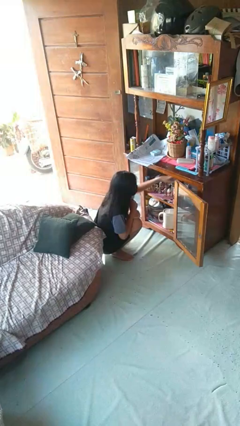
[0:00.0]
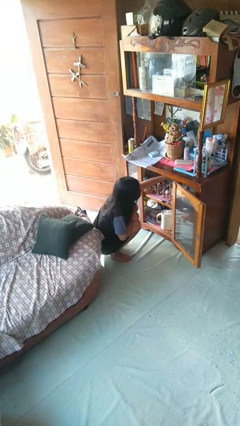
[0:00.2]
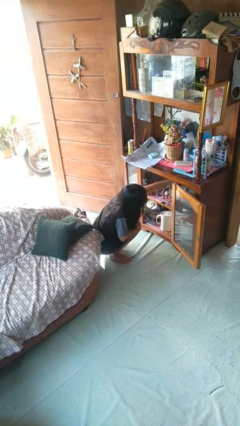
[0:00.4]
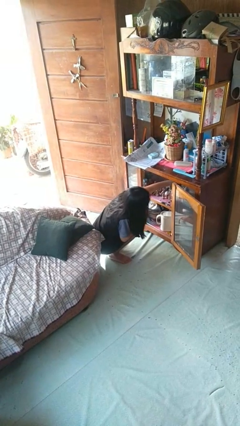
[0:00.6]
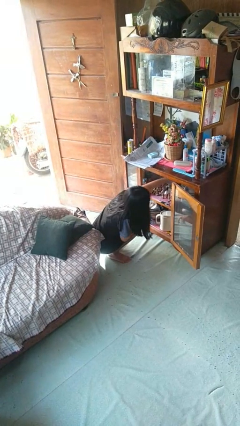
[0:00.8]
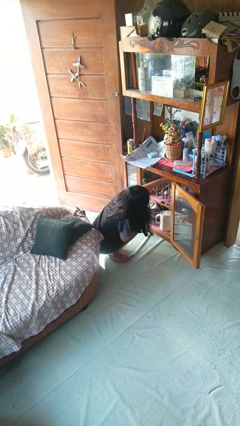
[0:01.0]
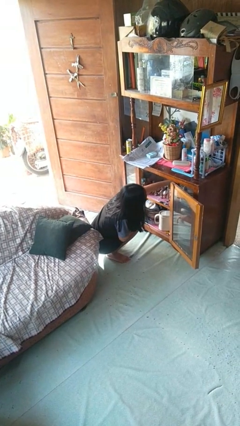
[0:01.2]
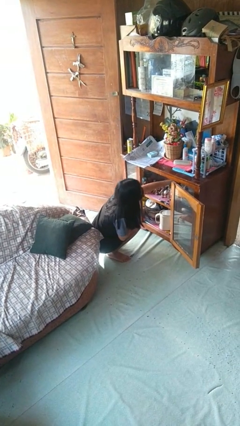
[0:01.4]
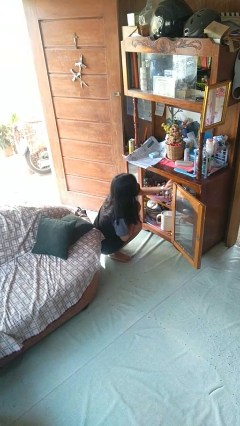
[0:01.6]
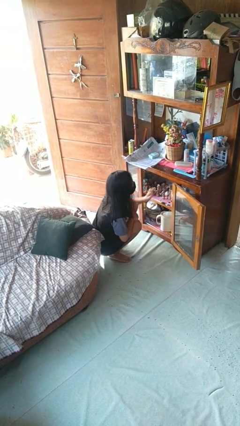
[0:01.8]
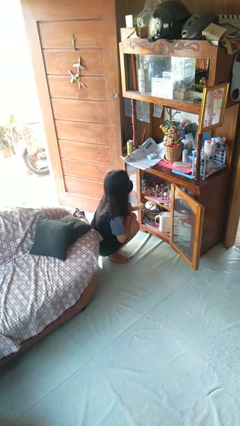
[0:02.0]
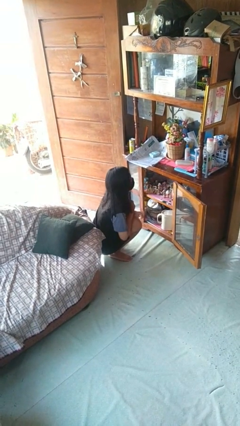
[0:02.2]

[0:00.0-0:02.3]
person searches in cabinet

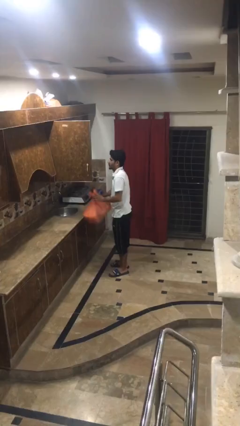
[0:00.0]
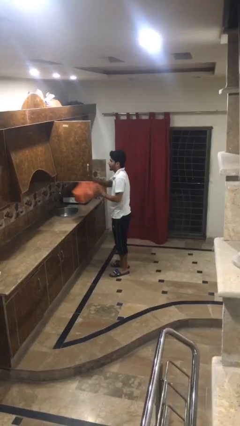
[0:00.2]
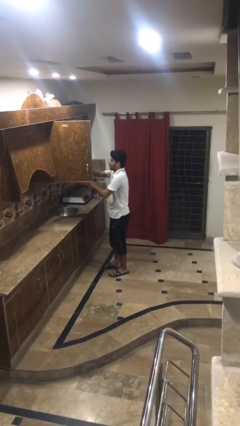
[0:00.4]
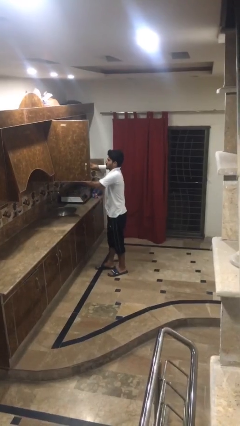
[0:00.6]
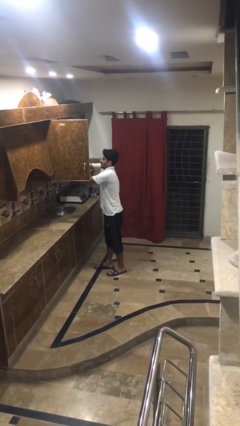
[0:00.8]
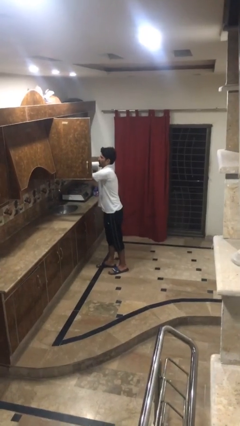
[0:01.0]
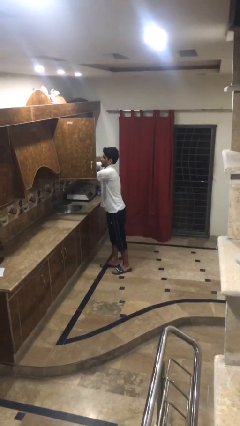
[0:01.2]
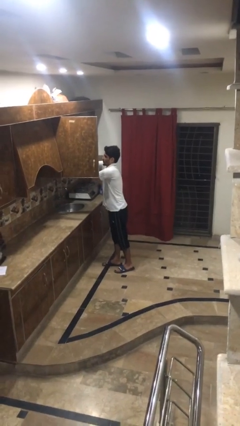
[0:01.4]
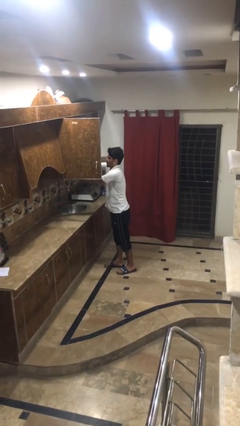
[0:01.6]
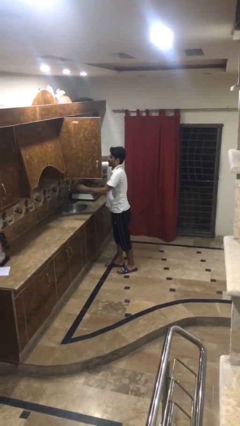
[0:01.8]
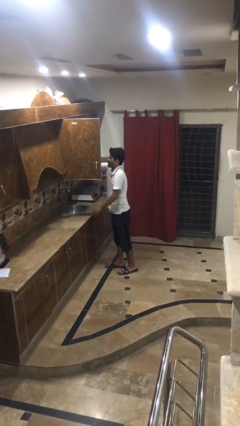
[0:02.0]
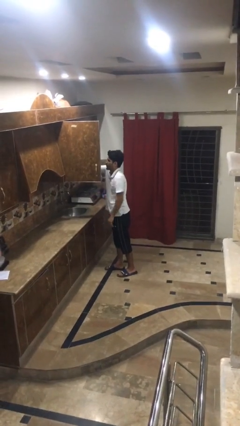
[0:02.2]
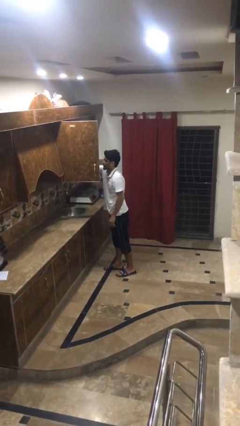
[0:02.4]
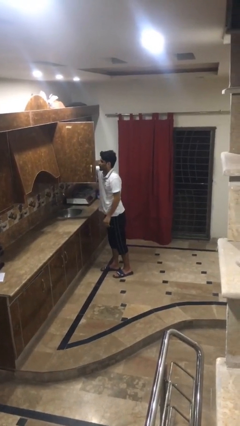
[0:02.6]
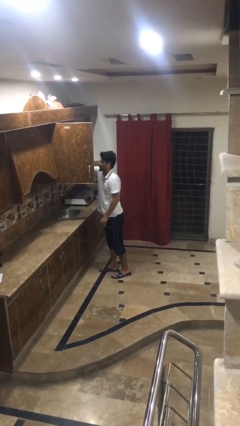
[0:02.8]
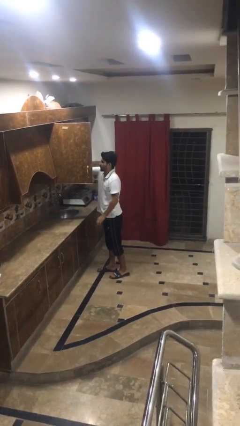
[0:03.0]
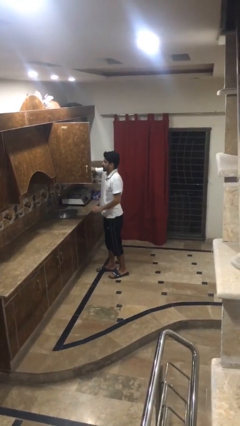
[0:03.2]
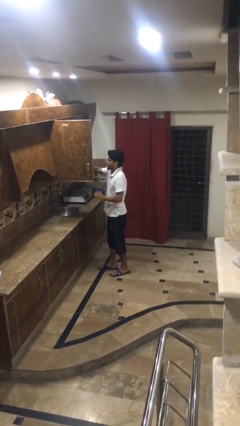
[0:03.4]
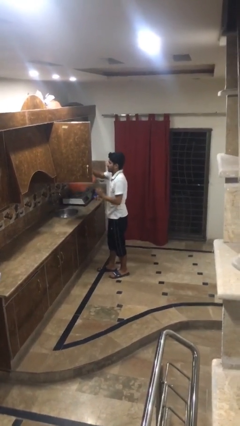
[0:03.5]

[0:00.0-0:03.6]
person loads groceries into cabinet

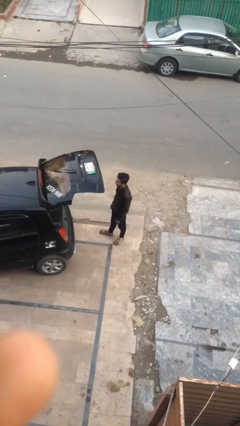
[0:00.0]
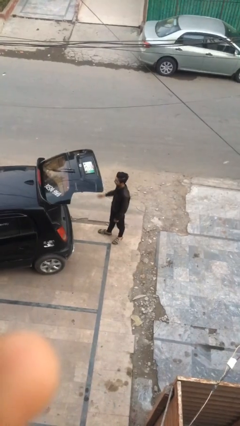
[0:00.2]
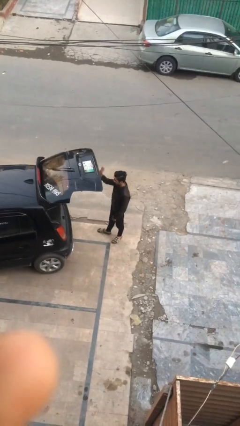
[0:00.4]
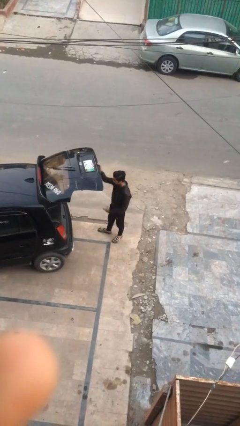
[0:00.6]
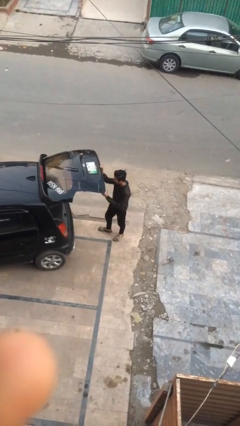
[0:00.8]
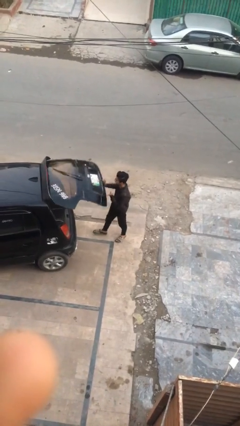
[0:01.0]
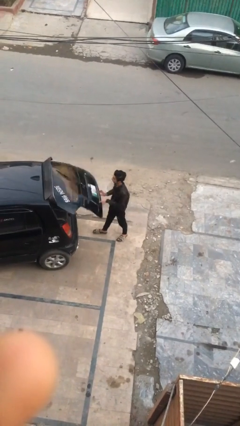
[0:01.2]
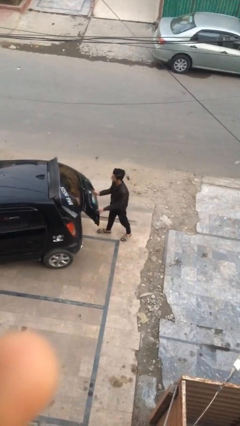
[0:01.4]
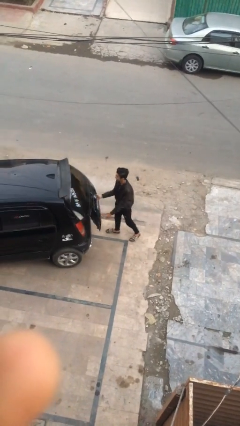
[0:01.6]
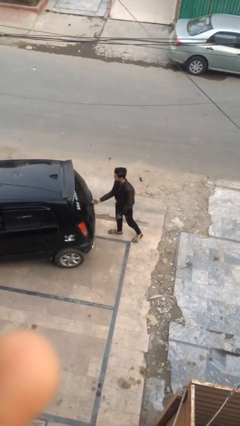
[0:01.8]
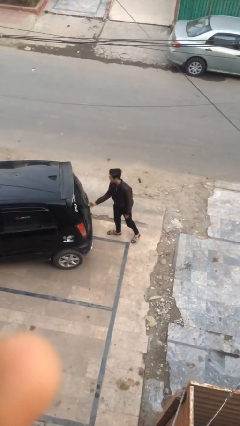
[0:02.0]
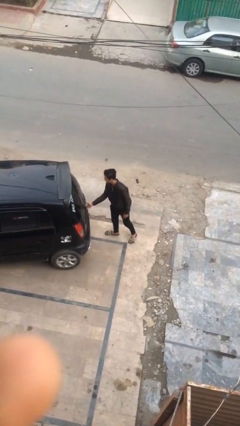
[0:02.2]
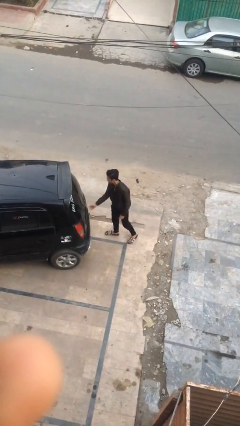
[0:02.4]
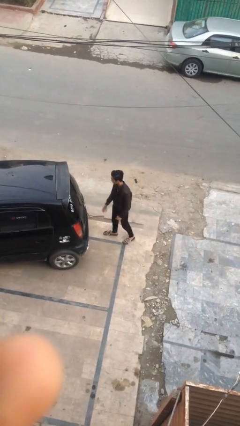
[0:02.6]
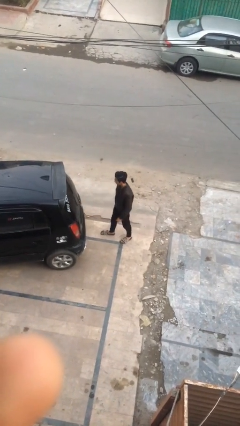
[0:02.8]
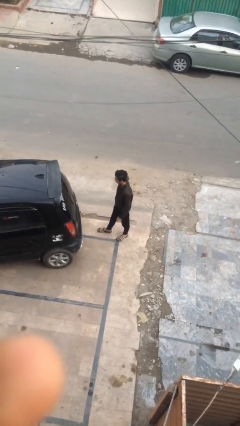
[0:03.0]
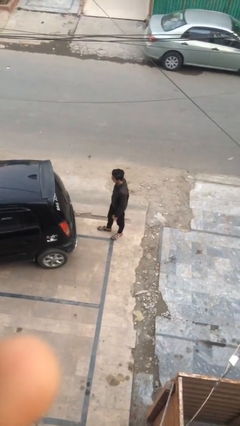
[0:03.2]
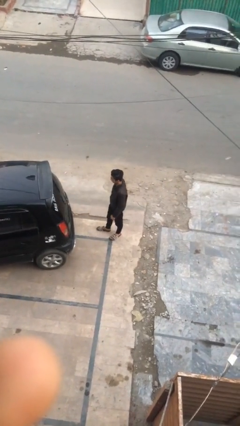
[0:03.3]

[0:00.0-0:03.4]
person closes car trunk

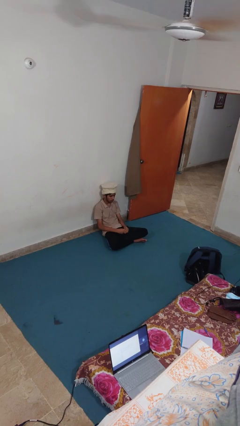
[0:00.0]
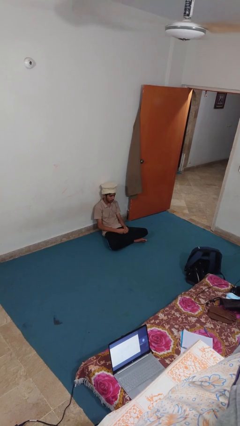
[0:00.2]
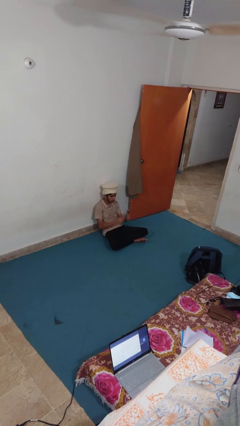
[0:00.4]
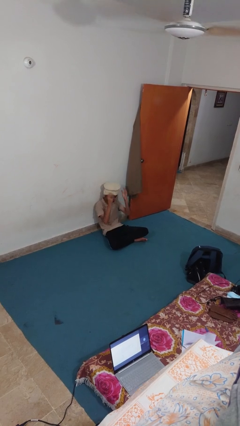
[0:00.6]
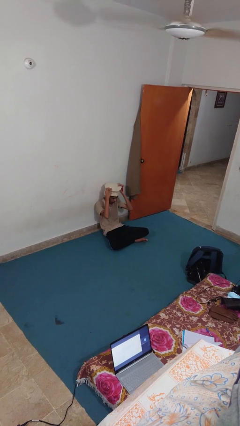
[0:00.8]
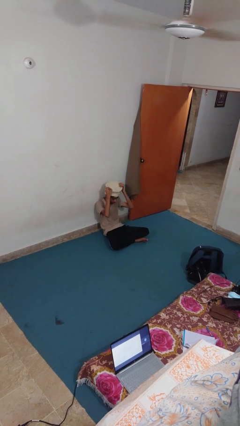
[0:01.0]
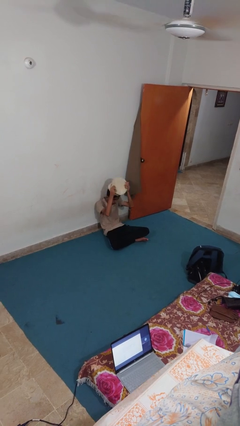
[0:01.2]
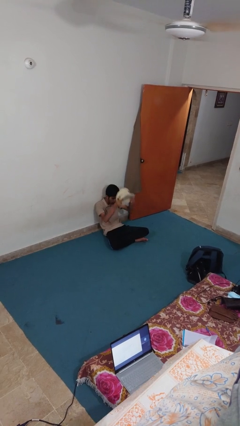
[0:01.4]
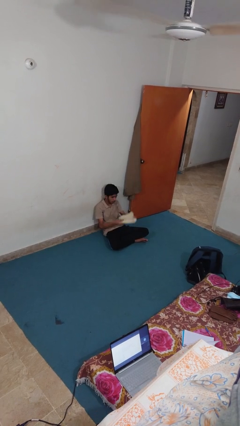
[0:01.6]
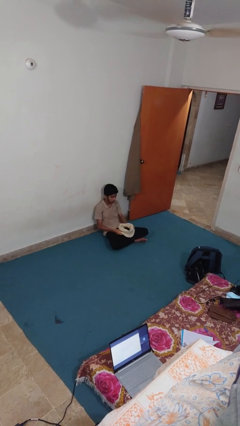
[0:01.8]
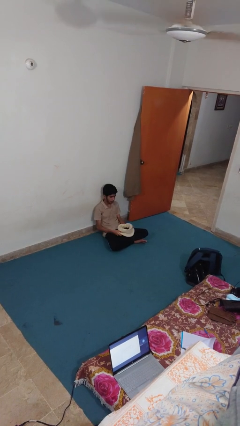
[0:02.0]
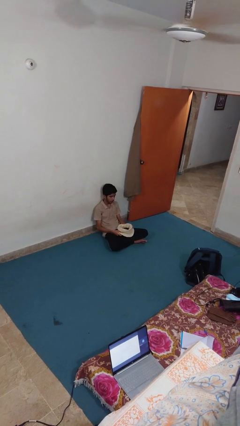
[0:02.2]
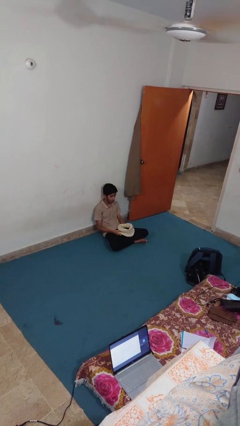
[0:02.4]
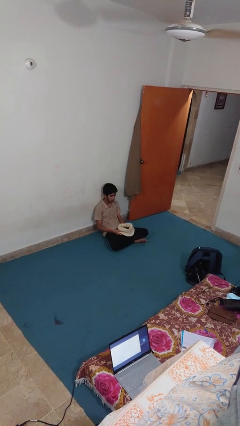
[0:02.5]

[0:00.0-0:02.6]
person takes off hat

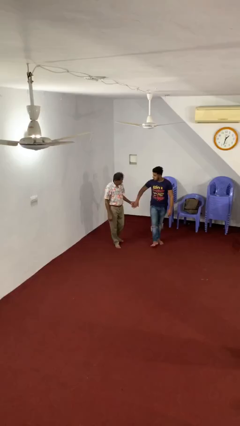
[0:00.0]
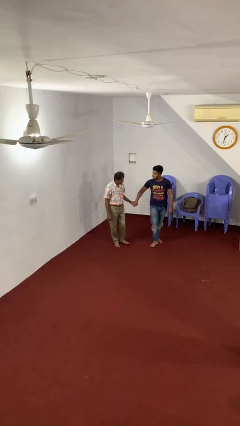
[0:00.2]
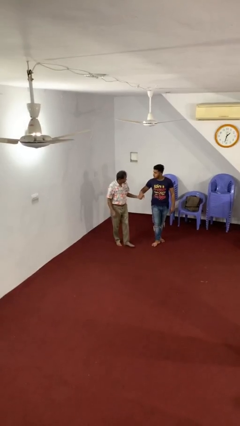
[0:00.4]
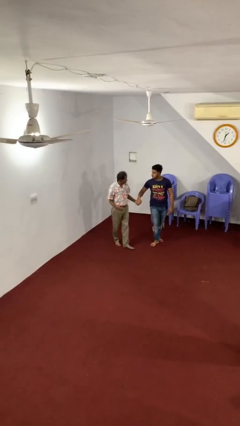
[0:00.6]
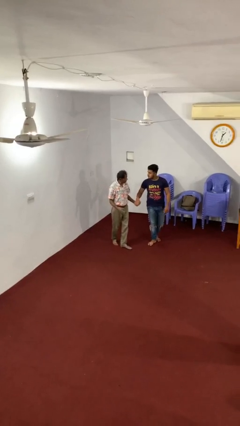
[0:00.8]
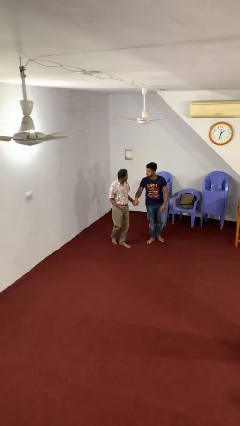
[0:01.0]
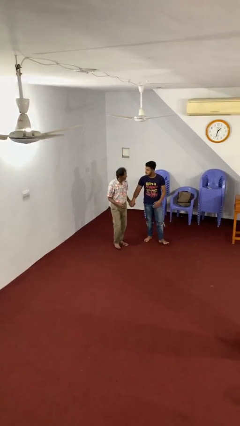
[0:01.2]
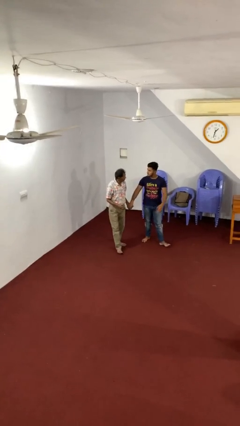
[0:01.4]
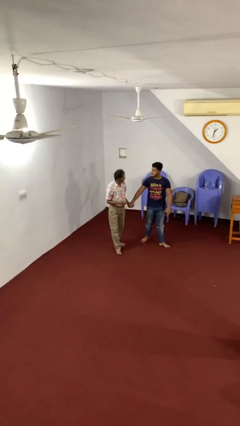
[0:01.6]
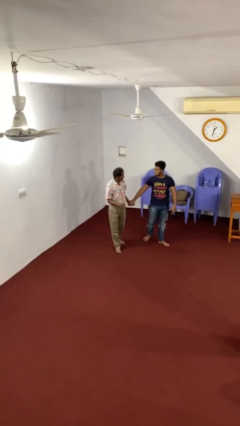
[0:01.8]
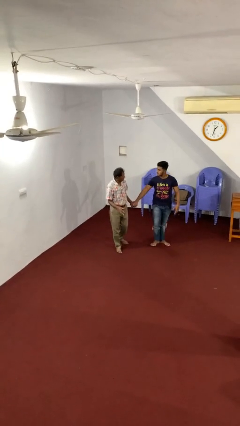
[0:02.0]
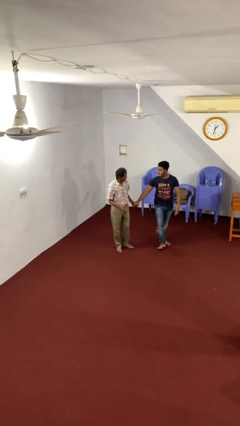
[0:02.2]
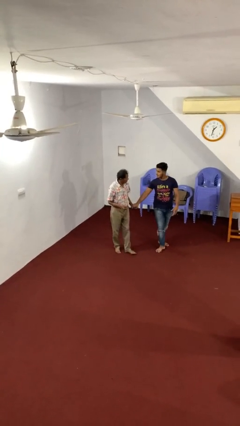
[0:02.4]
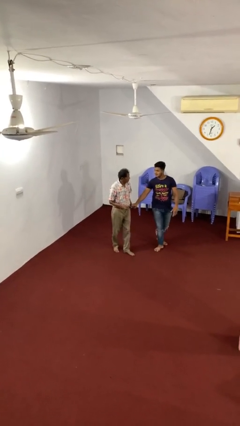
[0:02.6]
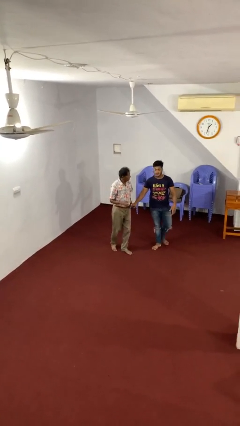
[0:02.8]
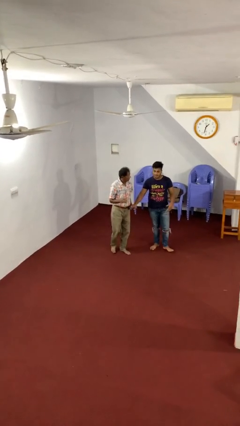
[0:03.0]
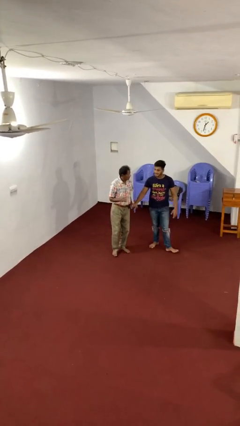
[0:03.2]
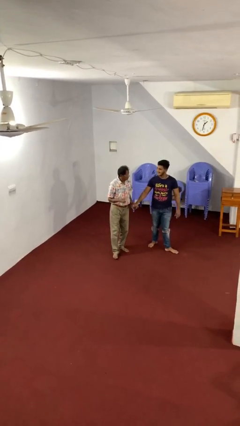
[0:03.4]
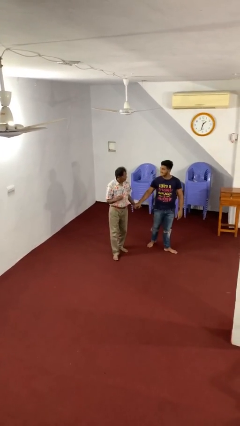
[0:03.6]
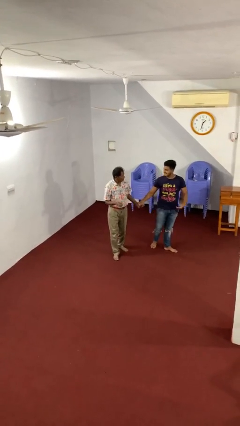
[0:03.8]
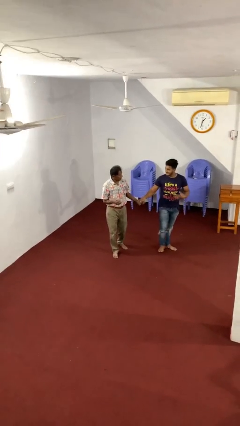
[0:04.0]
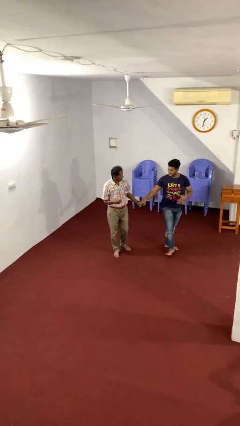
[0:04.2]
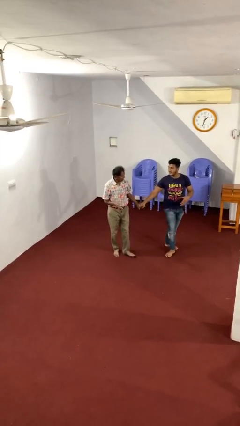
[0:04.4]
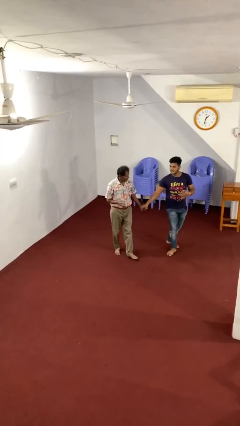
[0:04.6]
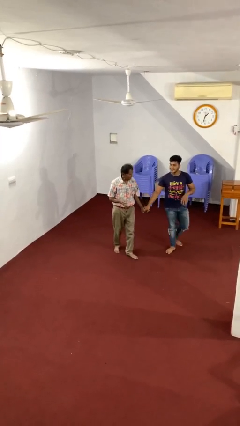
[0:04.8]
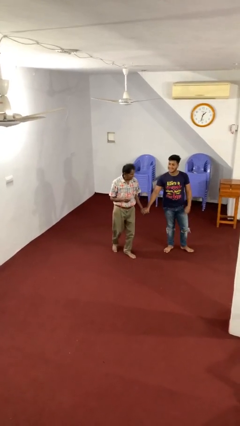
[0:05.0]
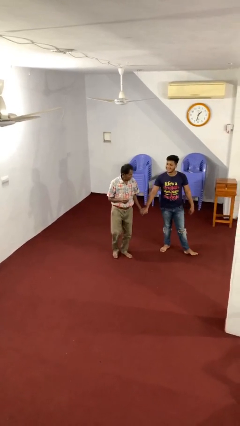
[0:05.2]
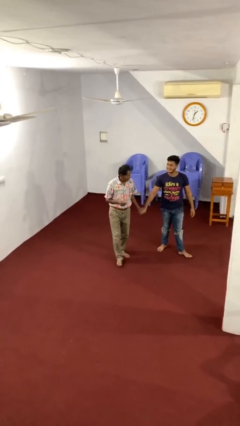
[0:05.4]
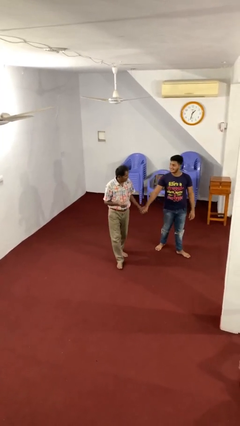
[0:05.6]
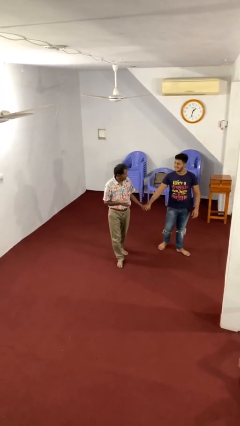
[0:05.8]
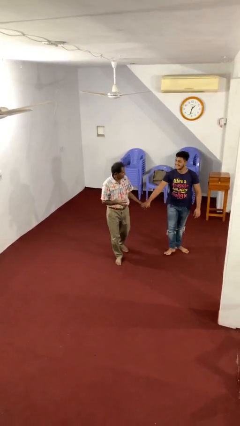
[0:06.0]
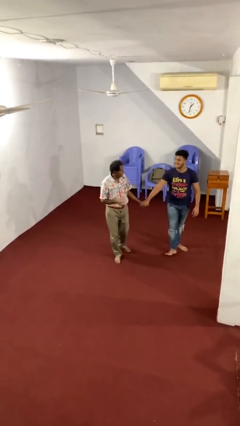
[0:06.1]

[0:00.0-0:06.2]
person holds hand
